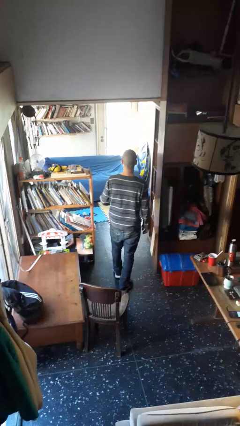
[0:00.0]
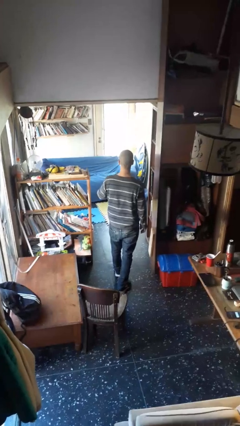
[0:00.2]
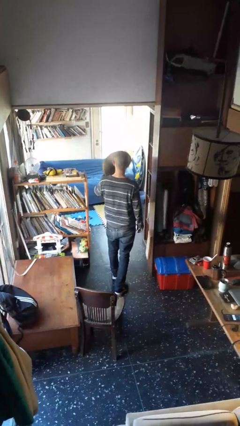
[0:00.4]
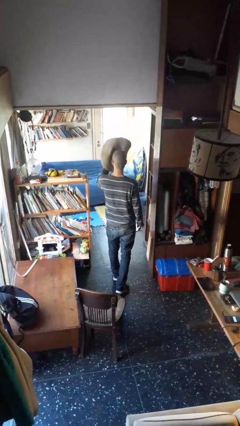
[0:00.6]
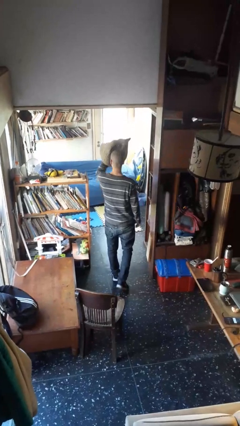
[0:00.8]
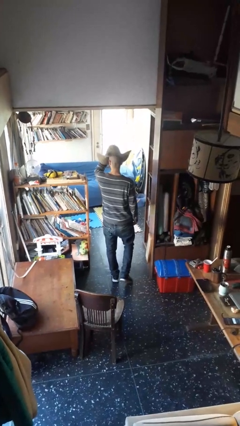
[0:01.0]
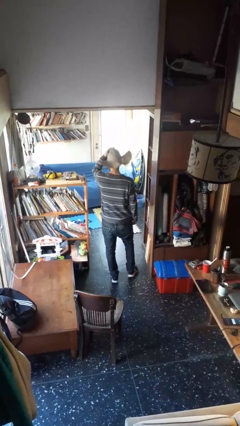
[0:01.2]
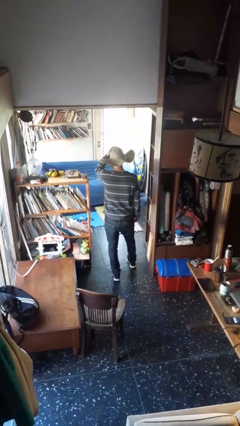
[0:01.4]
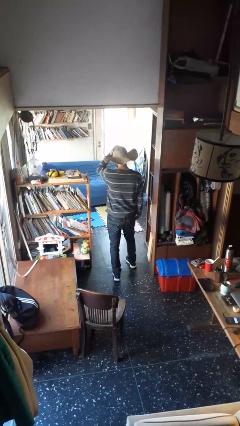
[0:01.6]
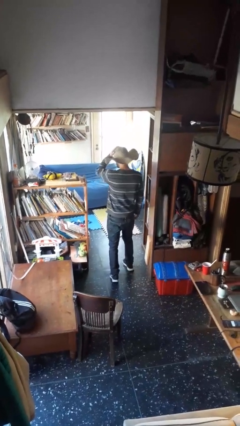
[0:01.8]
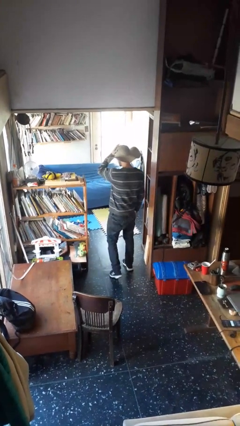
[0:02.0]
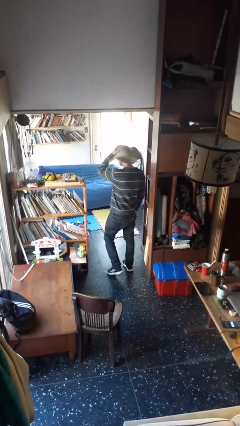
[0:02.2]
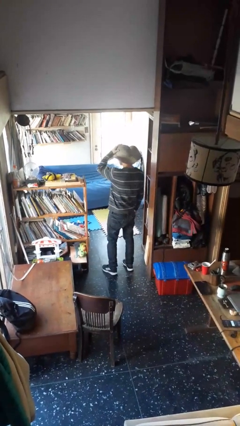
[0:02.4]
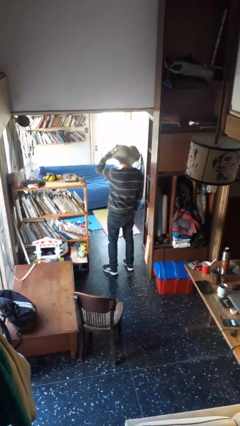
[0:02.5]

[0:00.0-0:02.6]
person puts on hat

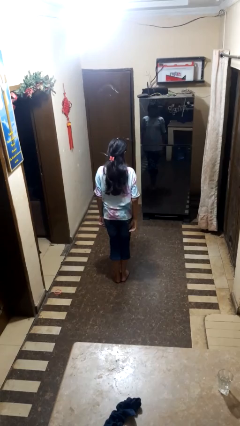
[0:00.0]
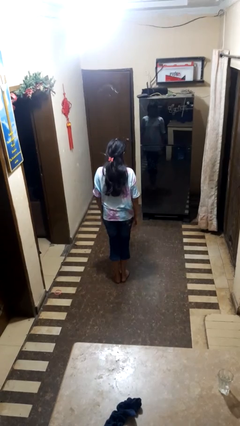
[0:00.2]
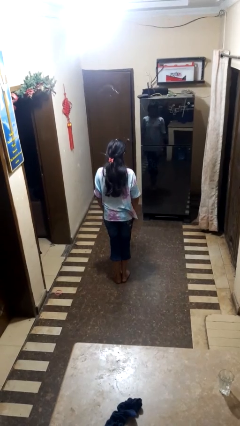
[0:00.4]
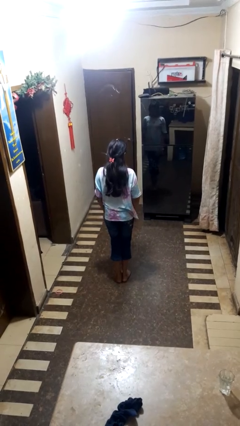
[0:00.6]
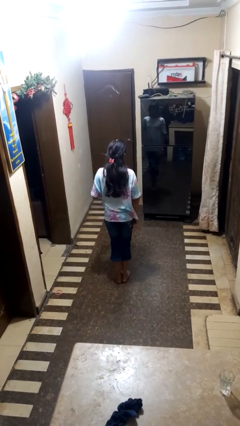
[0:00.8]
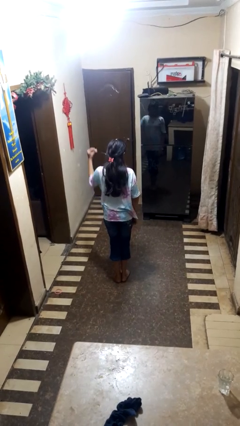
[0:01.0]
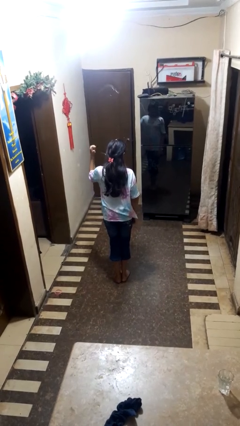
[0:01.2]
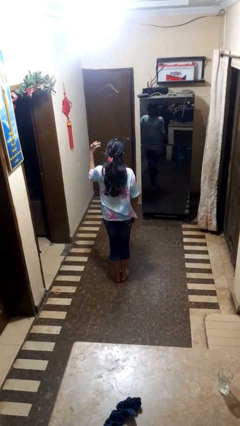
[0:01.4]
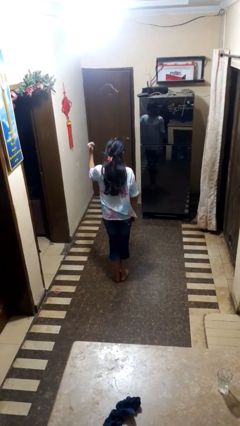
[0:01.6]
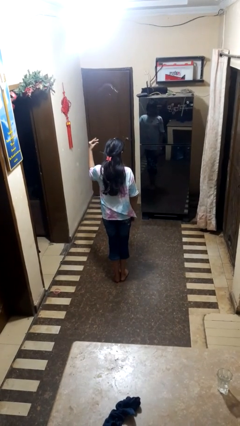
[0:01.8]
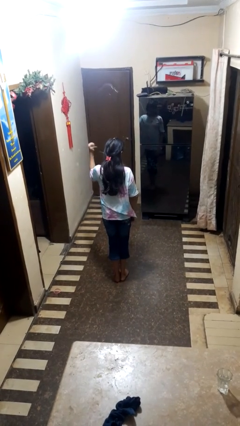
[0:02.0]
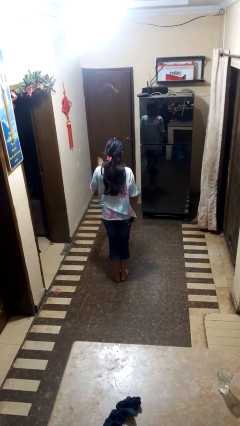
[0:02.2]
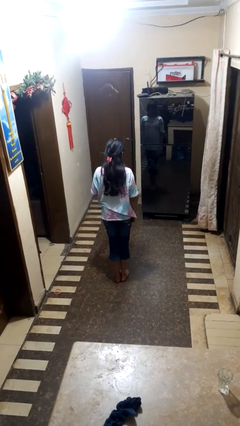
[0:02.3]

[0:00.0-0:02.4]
person snaps fingers

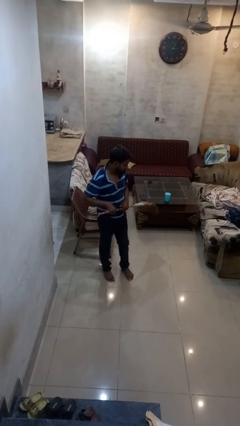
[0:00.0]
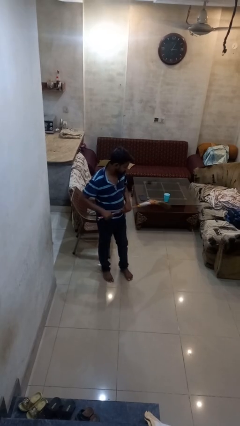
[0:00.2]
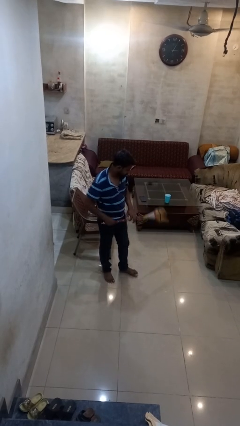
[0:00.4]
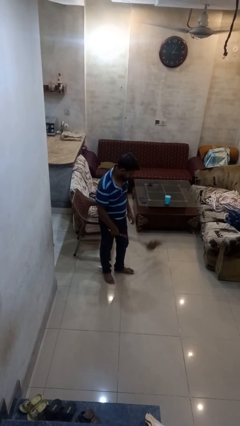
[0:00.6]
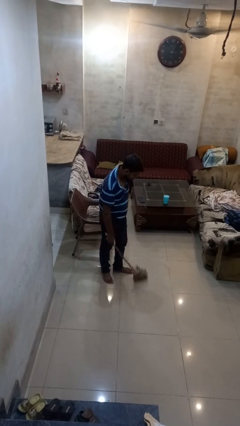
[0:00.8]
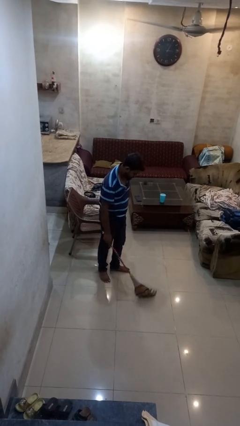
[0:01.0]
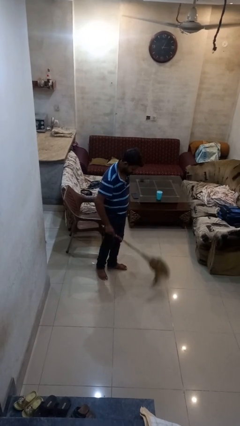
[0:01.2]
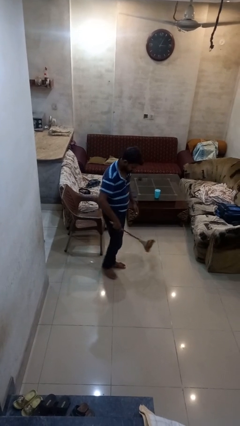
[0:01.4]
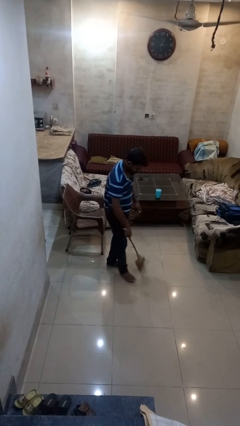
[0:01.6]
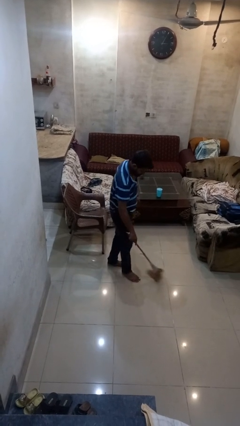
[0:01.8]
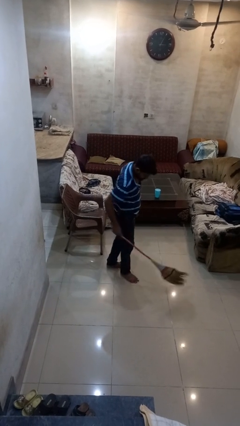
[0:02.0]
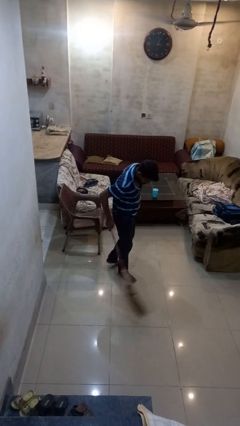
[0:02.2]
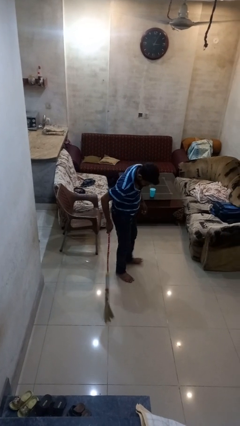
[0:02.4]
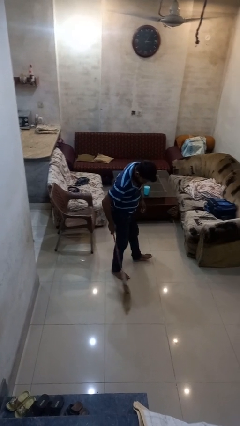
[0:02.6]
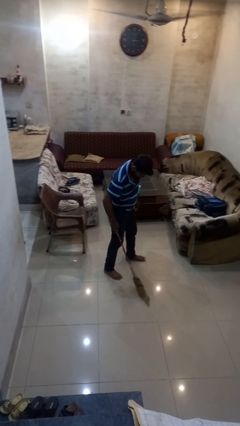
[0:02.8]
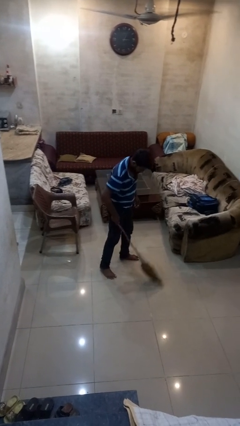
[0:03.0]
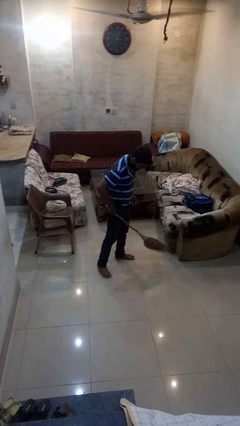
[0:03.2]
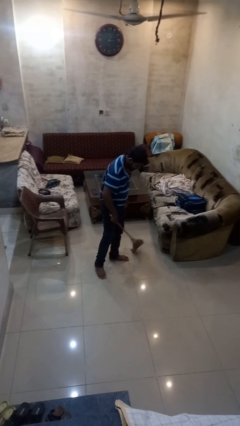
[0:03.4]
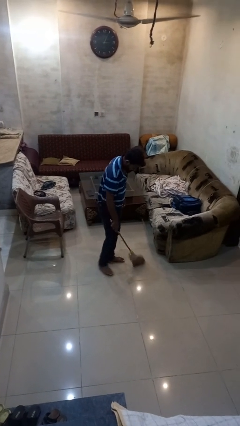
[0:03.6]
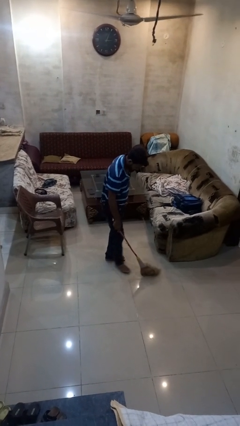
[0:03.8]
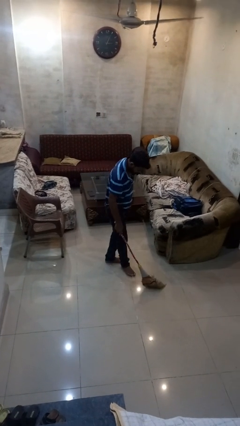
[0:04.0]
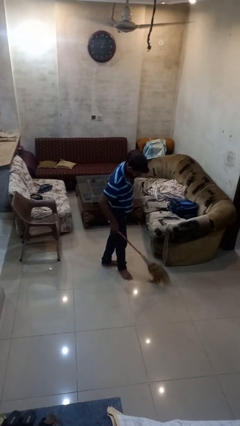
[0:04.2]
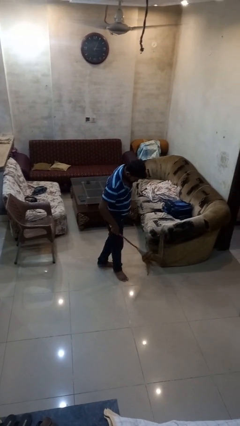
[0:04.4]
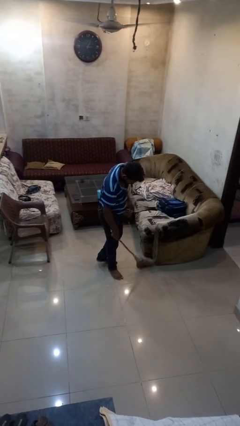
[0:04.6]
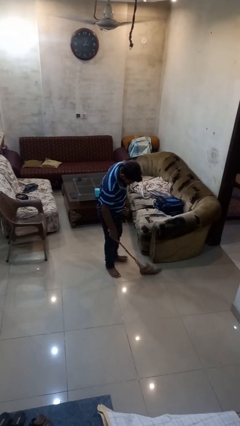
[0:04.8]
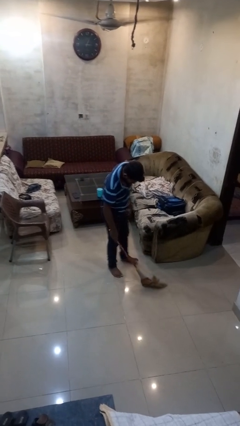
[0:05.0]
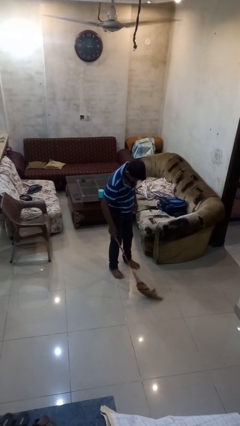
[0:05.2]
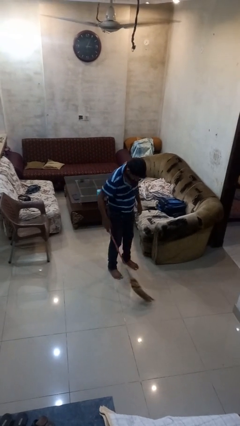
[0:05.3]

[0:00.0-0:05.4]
person sweeps floor

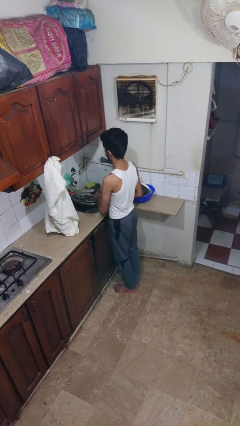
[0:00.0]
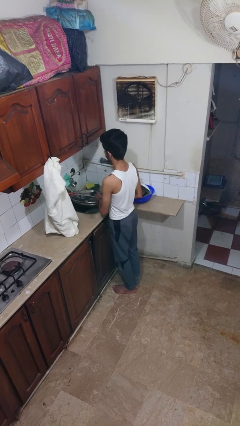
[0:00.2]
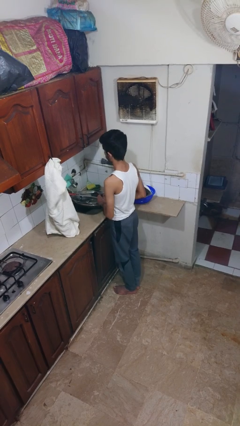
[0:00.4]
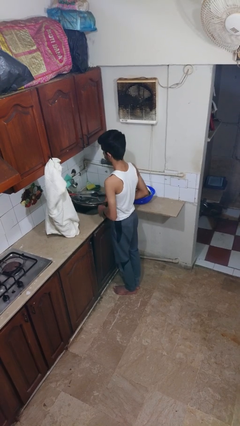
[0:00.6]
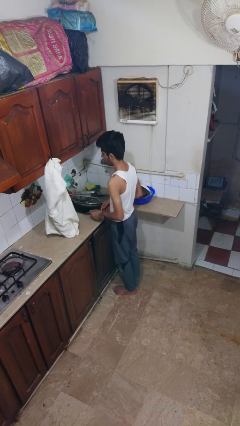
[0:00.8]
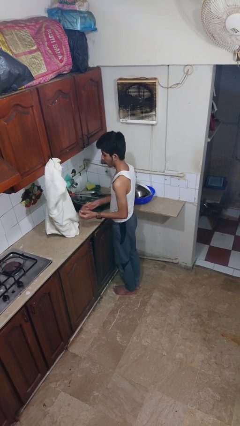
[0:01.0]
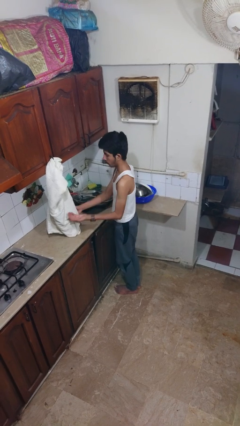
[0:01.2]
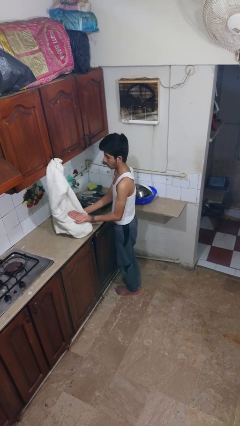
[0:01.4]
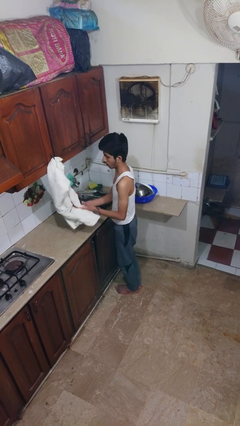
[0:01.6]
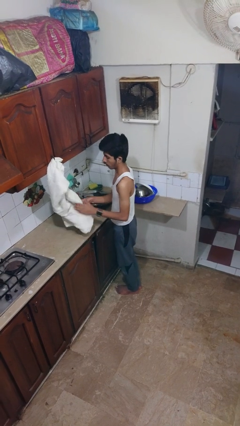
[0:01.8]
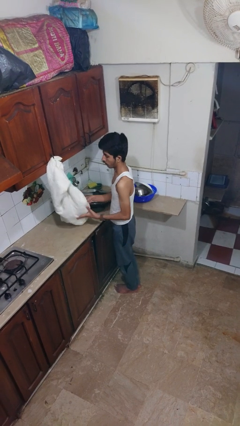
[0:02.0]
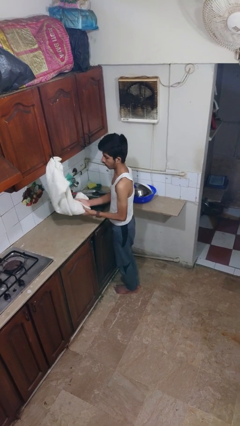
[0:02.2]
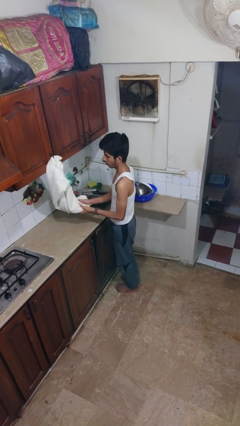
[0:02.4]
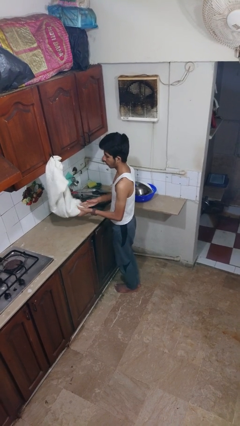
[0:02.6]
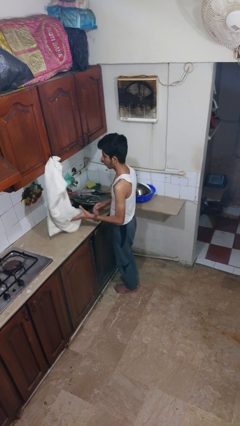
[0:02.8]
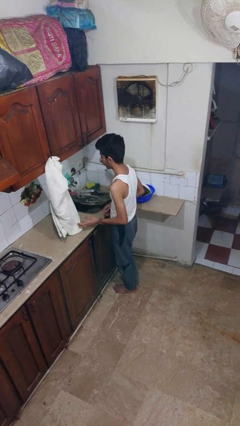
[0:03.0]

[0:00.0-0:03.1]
person dries hands with towel

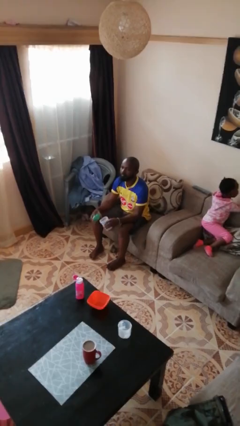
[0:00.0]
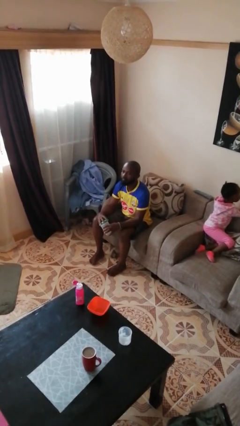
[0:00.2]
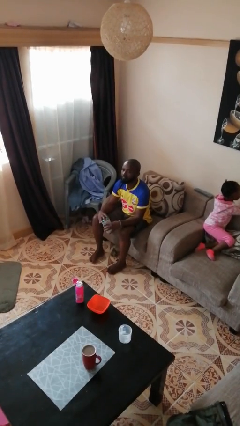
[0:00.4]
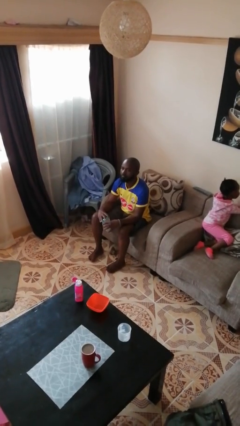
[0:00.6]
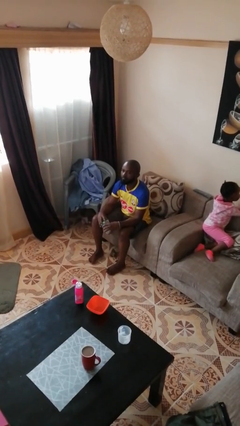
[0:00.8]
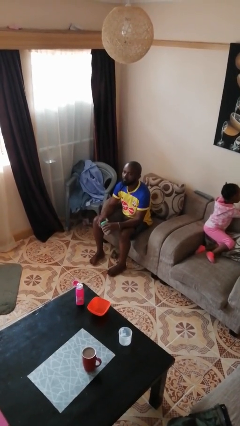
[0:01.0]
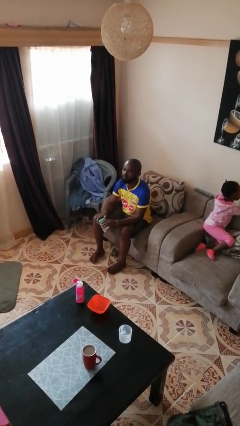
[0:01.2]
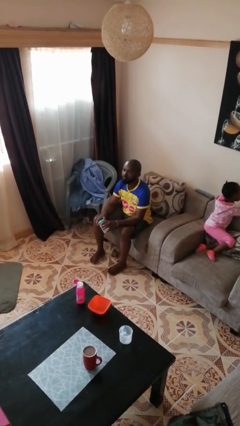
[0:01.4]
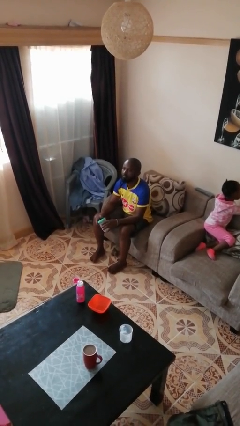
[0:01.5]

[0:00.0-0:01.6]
person closes jar

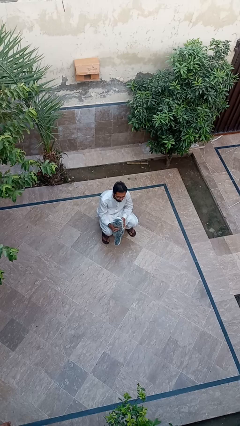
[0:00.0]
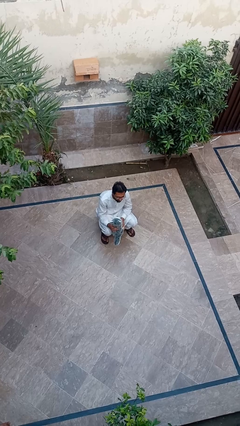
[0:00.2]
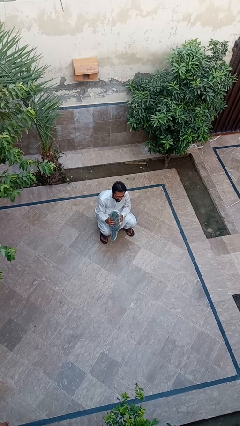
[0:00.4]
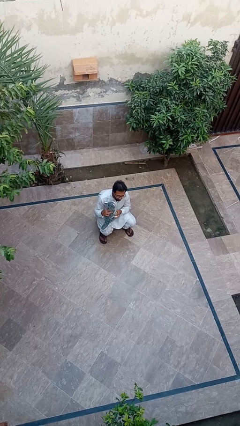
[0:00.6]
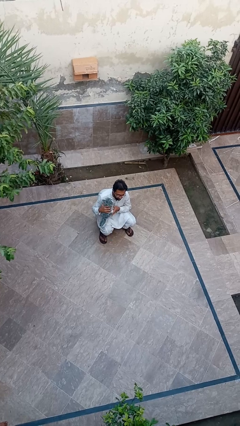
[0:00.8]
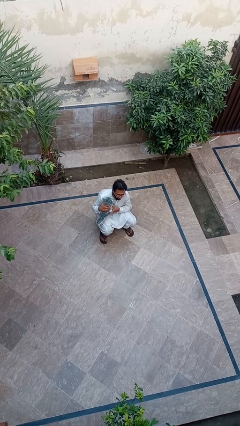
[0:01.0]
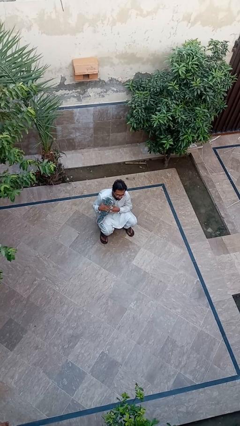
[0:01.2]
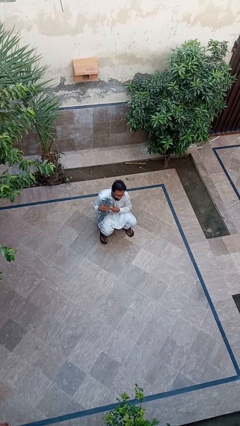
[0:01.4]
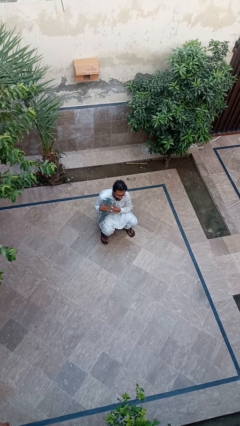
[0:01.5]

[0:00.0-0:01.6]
person hugs dog

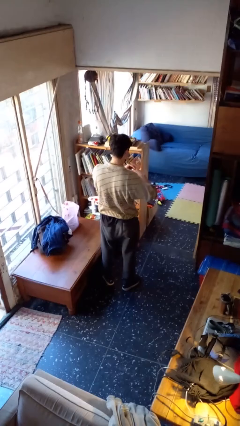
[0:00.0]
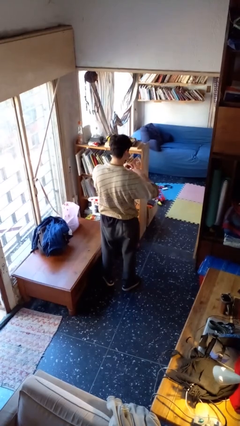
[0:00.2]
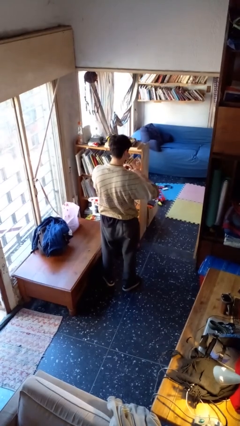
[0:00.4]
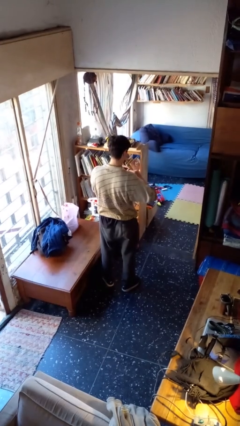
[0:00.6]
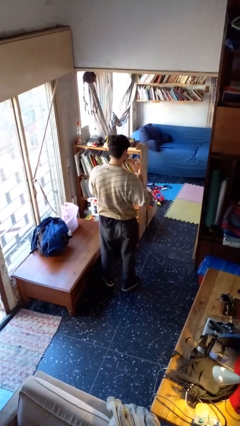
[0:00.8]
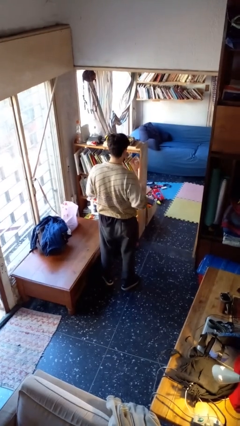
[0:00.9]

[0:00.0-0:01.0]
person takes off ring
